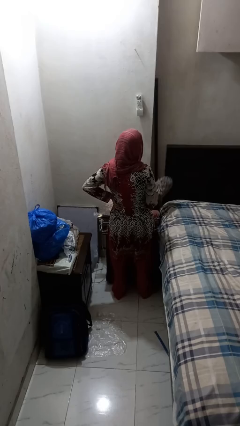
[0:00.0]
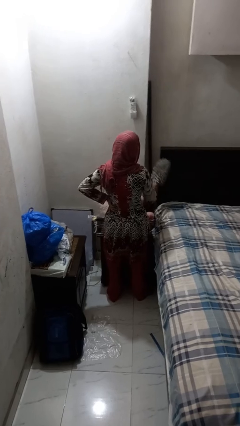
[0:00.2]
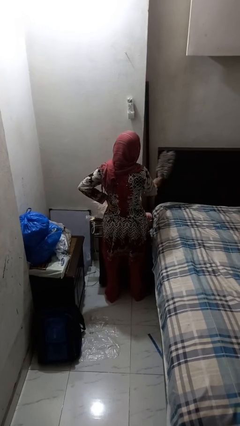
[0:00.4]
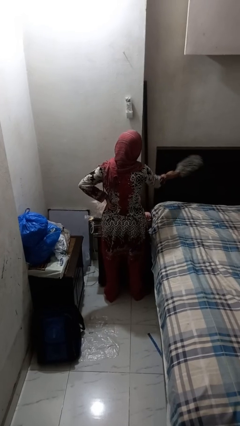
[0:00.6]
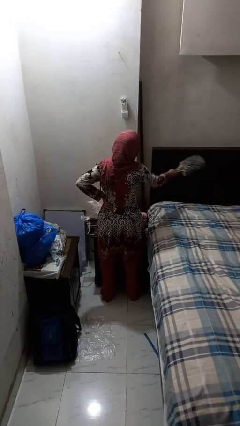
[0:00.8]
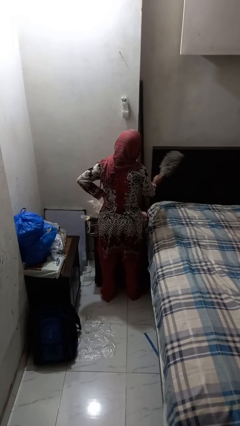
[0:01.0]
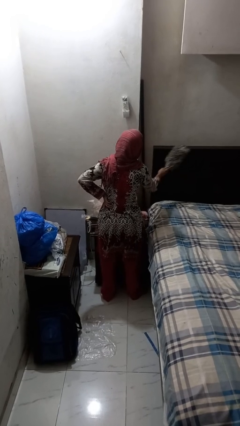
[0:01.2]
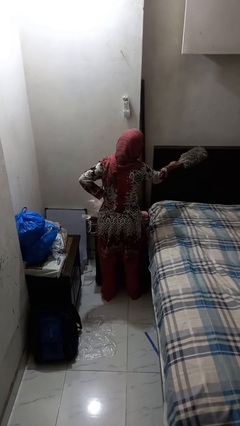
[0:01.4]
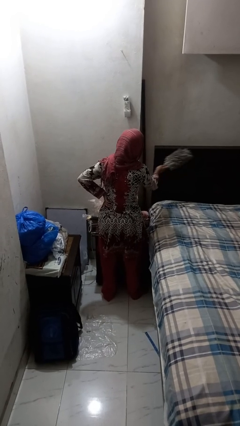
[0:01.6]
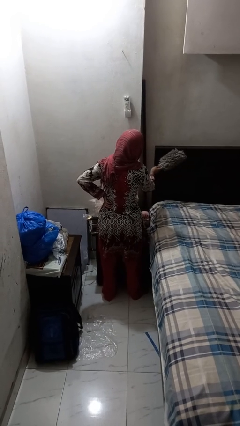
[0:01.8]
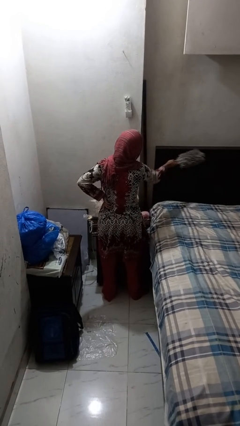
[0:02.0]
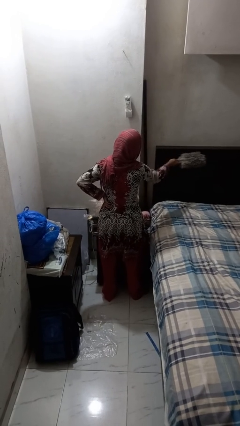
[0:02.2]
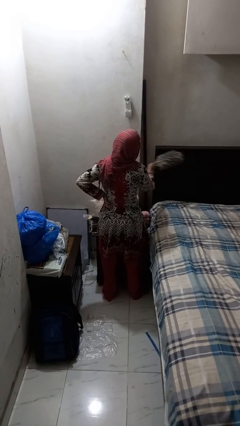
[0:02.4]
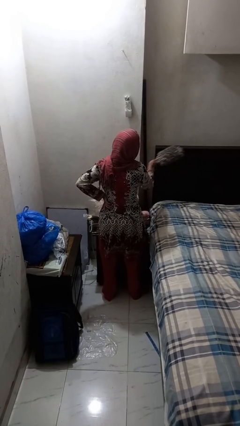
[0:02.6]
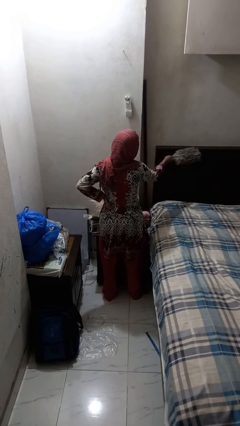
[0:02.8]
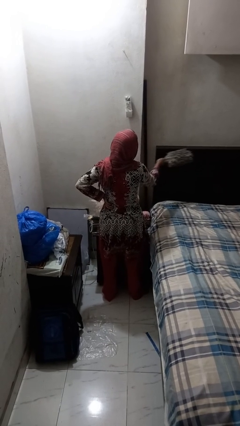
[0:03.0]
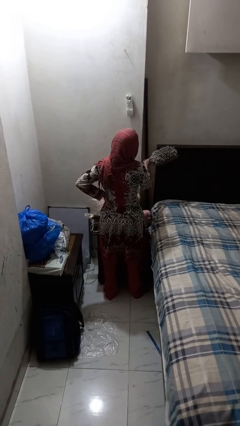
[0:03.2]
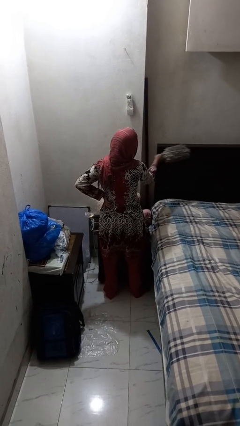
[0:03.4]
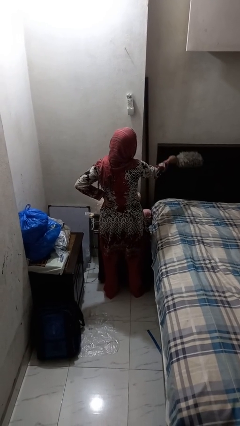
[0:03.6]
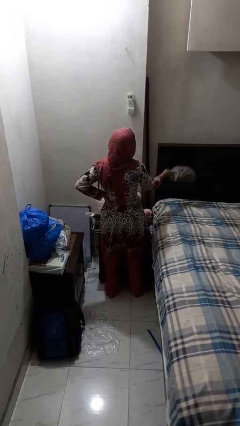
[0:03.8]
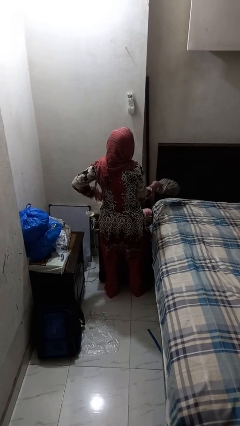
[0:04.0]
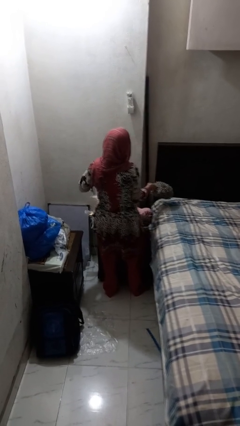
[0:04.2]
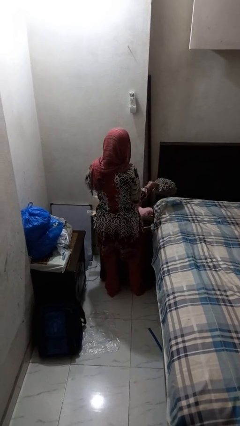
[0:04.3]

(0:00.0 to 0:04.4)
person dusts furniture

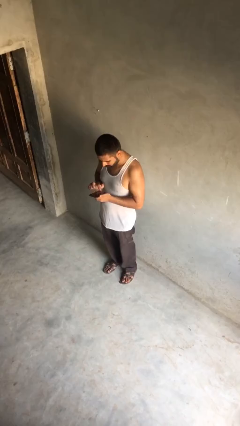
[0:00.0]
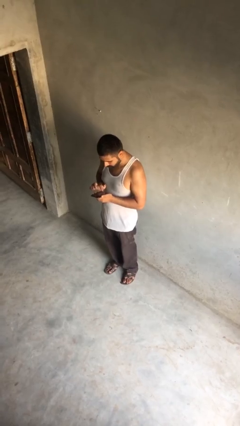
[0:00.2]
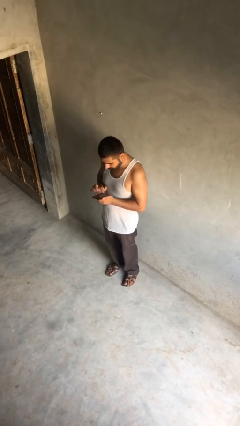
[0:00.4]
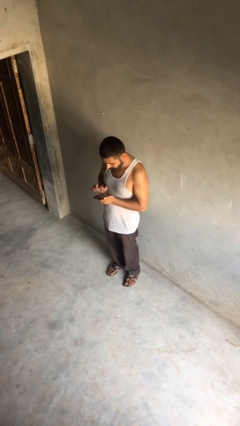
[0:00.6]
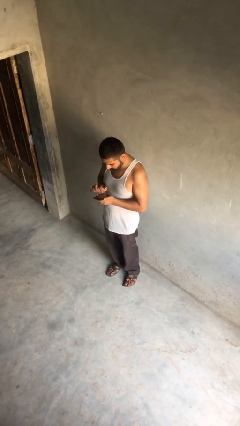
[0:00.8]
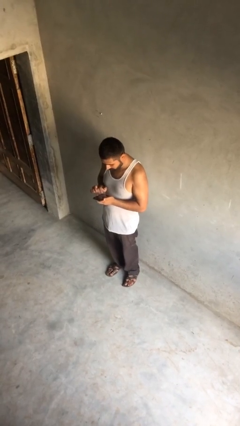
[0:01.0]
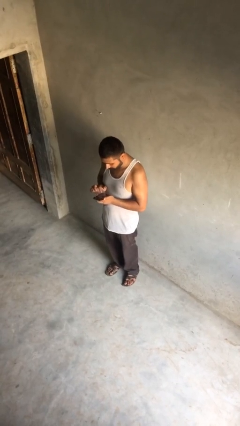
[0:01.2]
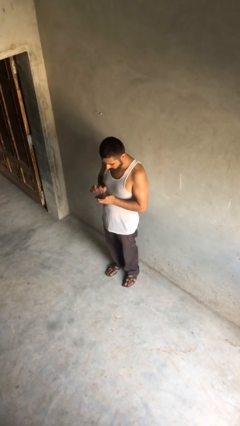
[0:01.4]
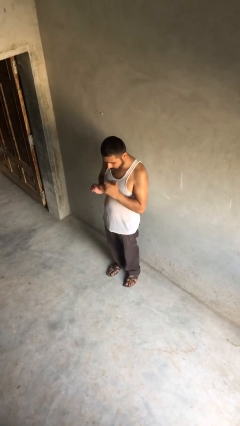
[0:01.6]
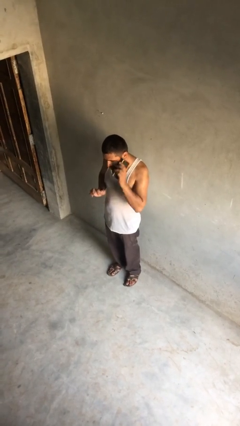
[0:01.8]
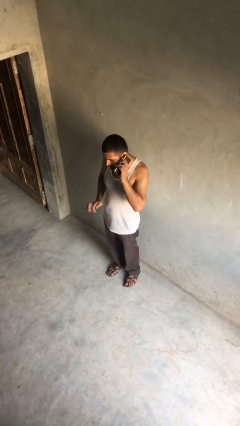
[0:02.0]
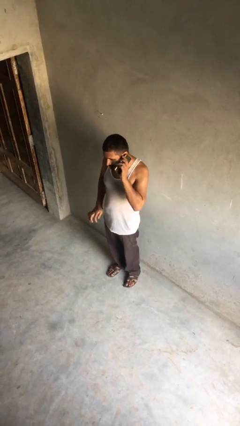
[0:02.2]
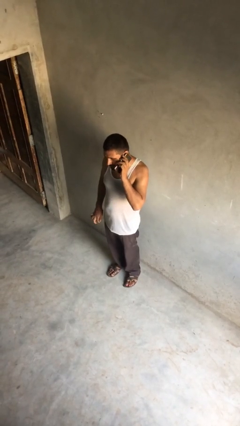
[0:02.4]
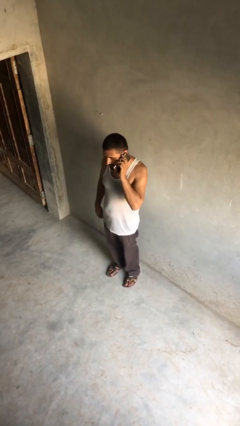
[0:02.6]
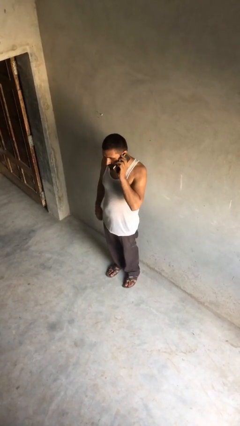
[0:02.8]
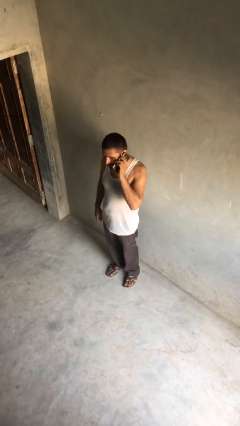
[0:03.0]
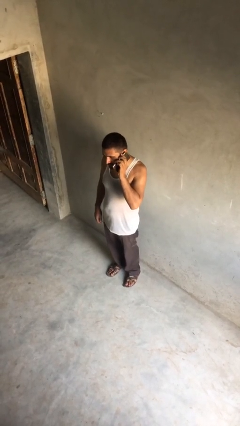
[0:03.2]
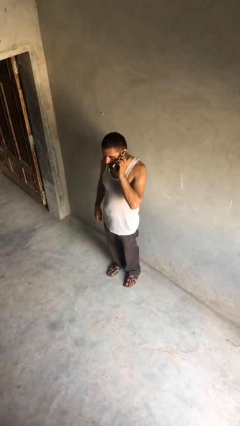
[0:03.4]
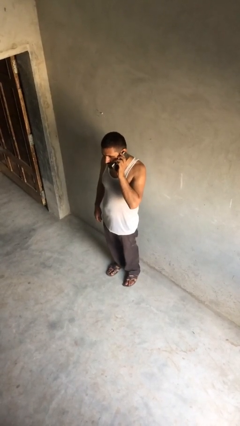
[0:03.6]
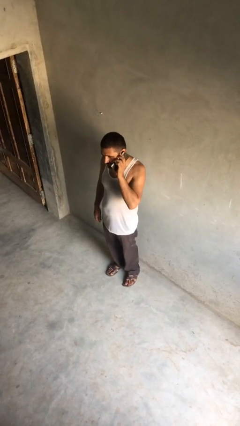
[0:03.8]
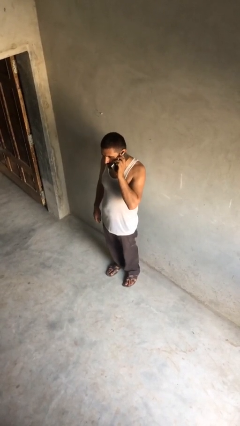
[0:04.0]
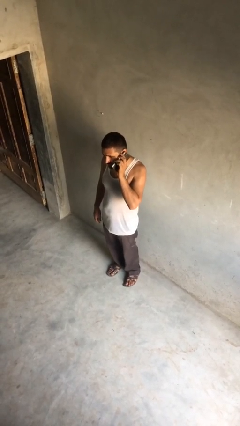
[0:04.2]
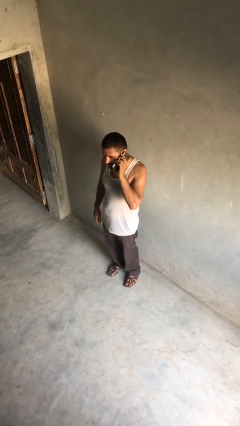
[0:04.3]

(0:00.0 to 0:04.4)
person talks on phone

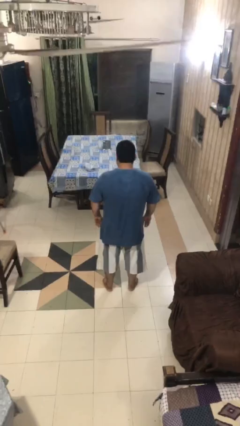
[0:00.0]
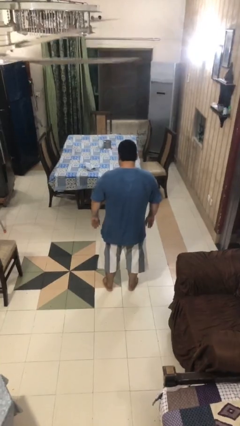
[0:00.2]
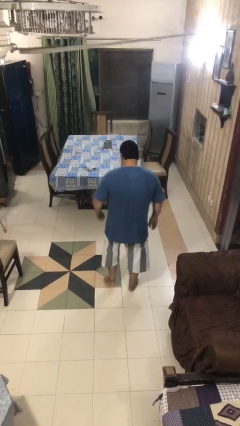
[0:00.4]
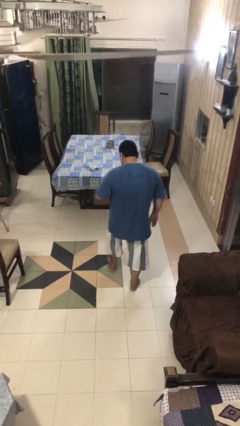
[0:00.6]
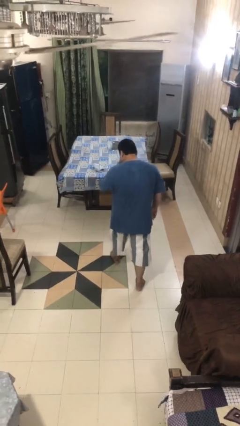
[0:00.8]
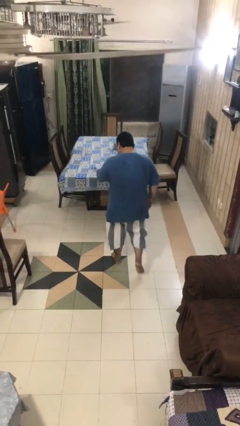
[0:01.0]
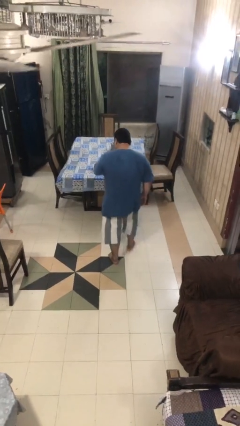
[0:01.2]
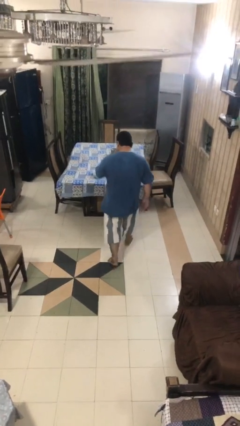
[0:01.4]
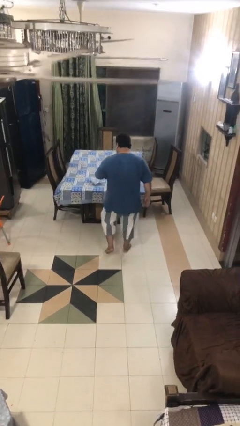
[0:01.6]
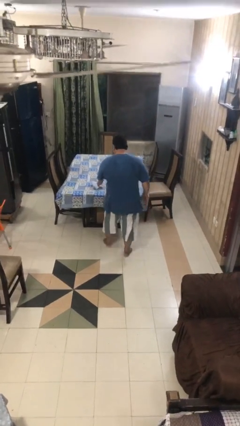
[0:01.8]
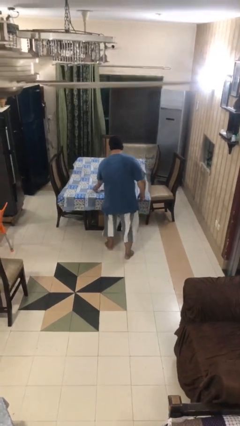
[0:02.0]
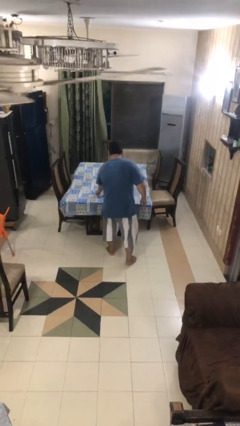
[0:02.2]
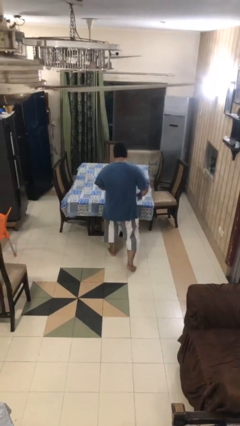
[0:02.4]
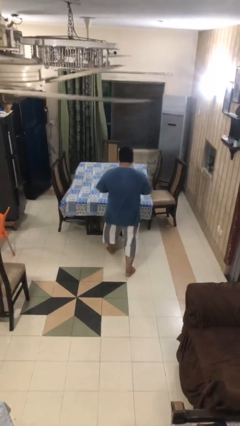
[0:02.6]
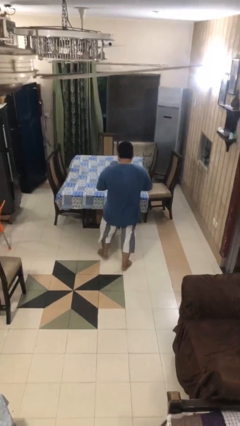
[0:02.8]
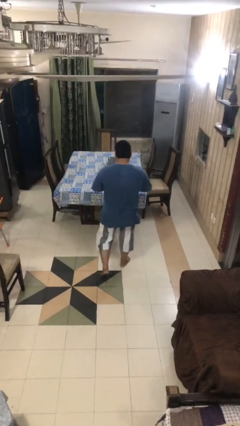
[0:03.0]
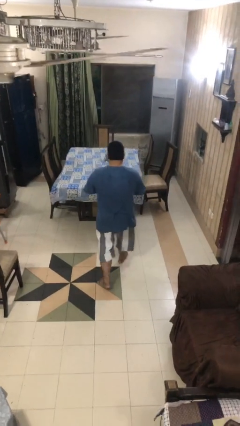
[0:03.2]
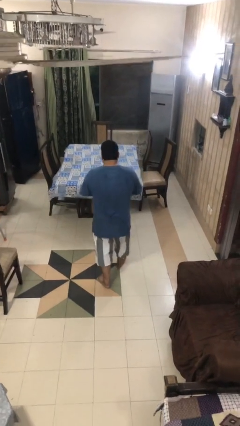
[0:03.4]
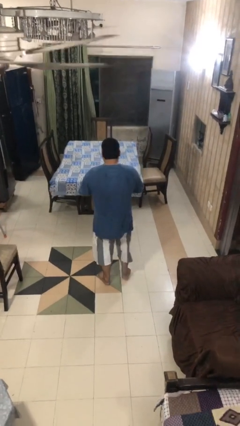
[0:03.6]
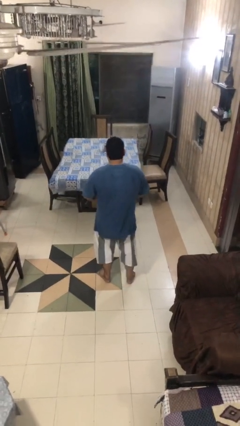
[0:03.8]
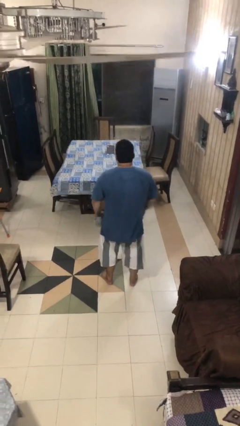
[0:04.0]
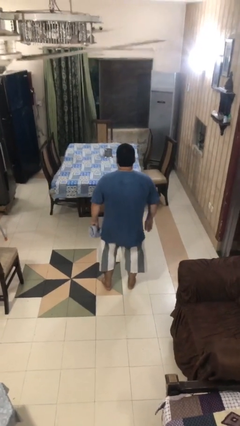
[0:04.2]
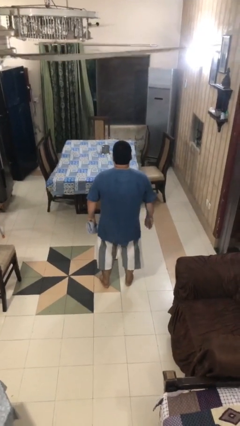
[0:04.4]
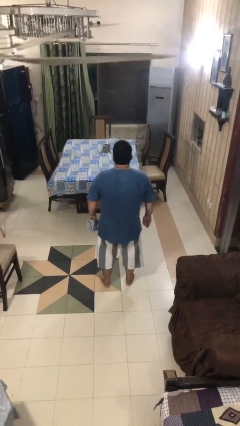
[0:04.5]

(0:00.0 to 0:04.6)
person picks up object from table

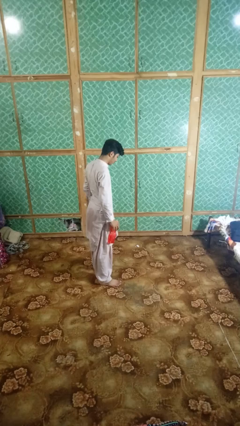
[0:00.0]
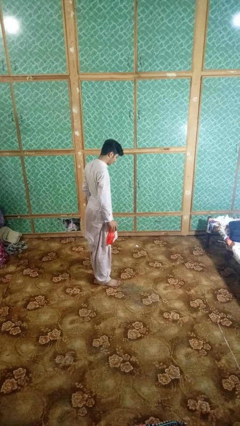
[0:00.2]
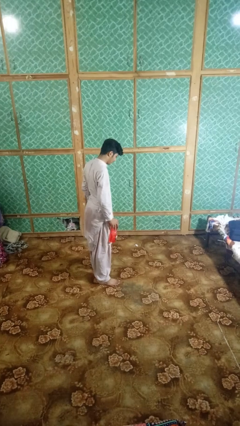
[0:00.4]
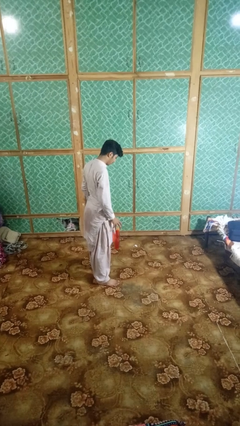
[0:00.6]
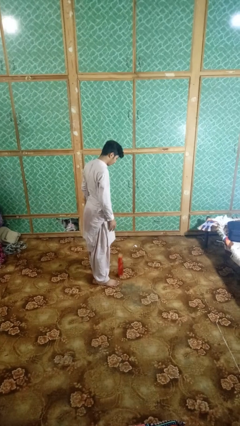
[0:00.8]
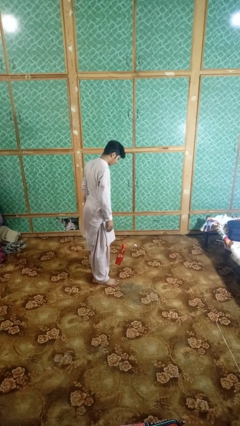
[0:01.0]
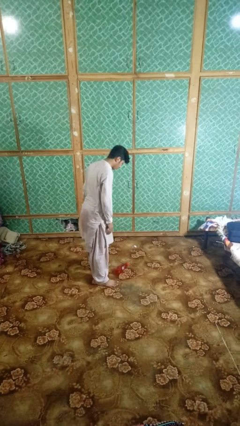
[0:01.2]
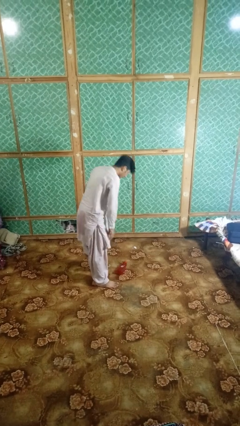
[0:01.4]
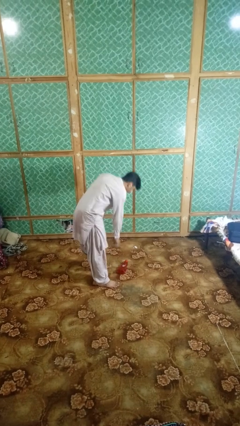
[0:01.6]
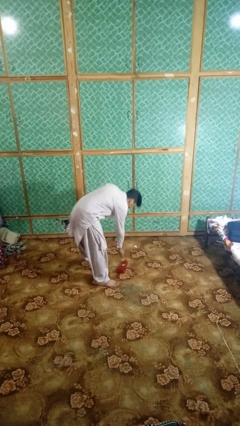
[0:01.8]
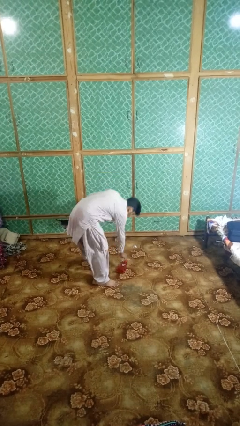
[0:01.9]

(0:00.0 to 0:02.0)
person drops object

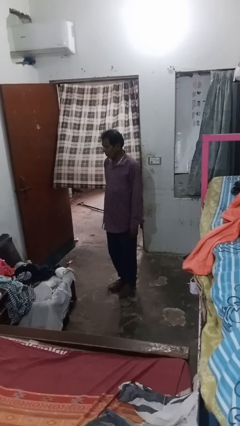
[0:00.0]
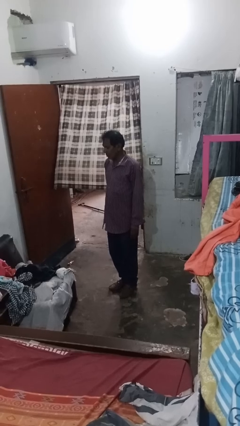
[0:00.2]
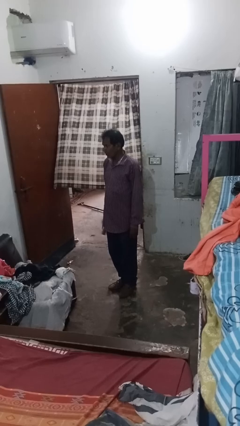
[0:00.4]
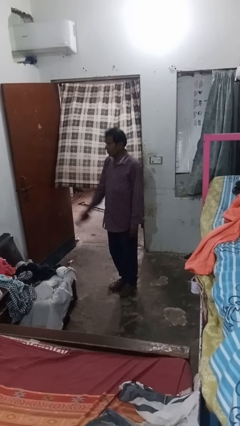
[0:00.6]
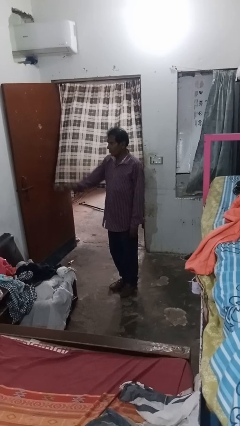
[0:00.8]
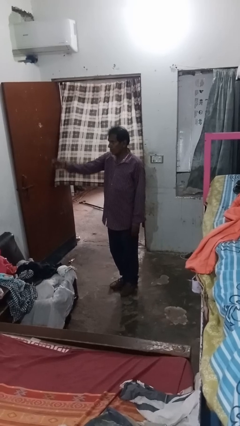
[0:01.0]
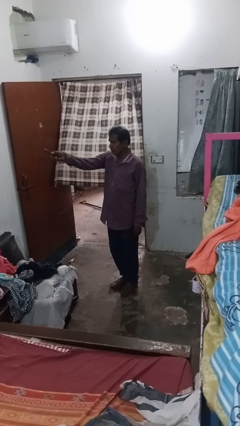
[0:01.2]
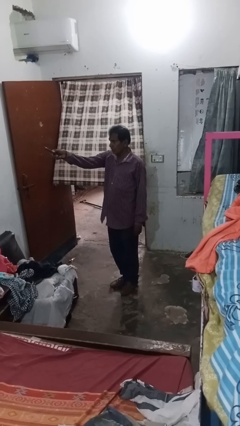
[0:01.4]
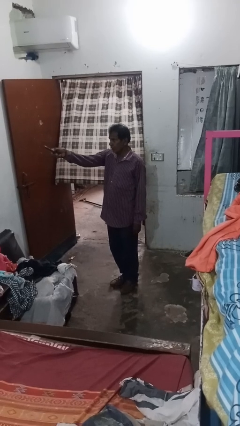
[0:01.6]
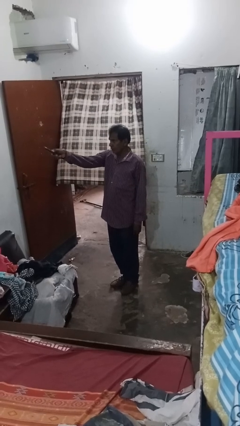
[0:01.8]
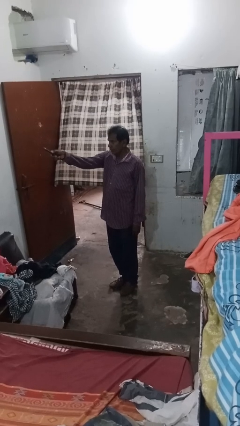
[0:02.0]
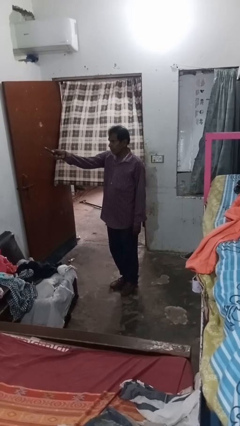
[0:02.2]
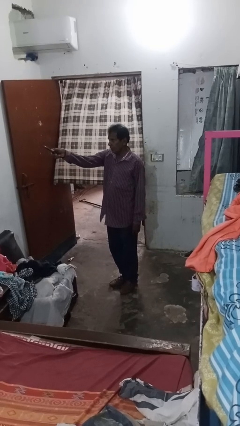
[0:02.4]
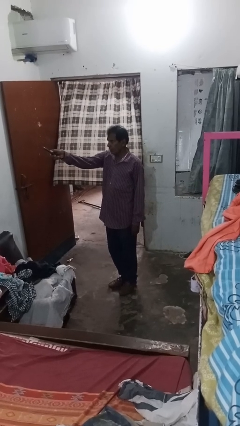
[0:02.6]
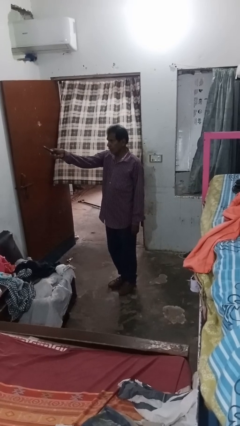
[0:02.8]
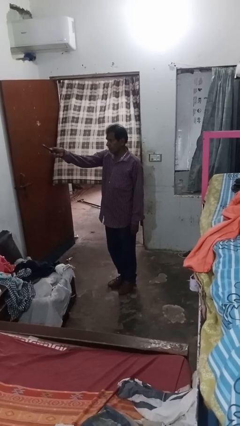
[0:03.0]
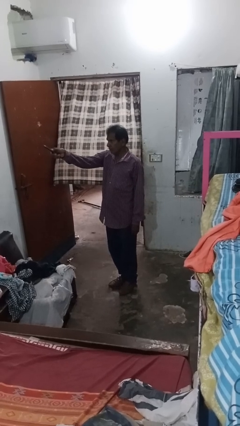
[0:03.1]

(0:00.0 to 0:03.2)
person uses television remote
